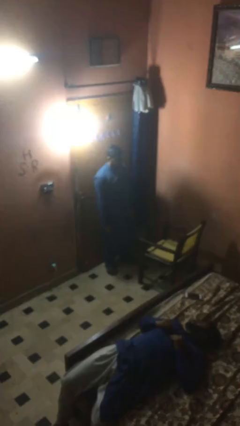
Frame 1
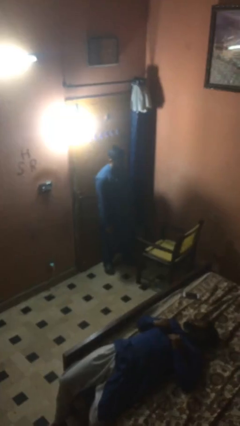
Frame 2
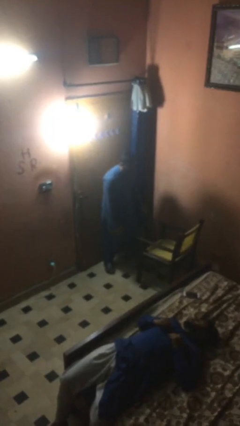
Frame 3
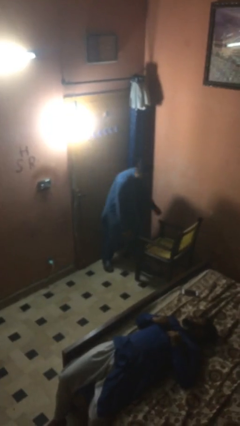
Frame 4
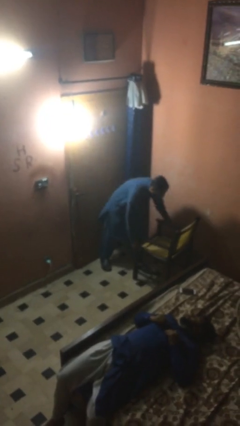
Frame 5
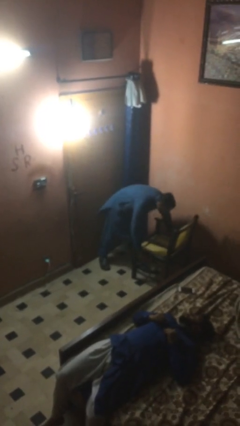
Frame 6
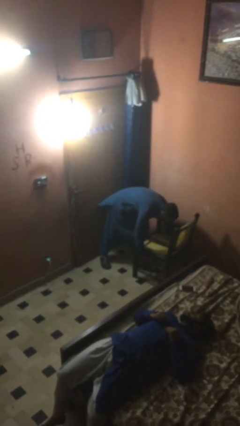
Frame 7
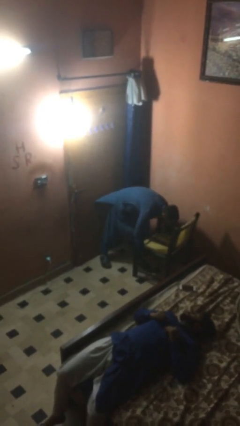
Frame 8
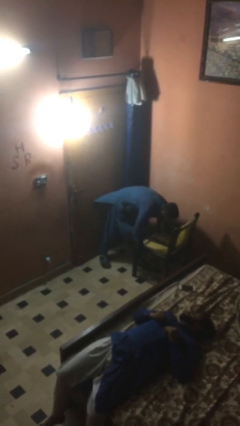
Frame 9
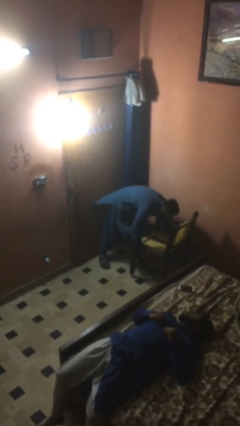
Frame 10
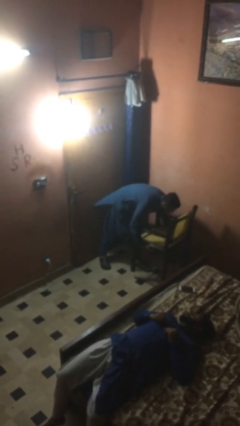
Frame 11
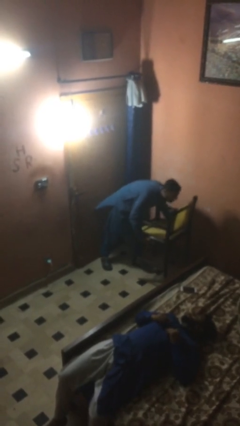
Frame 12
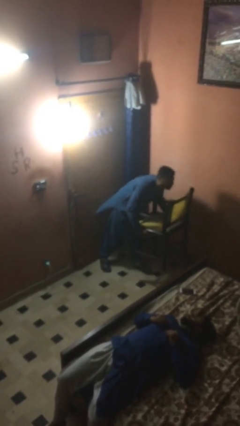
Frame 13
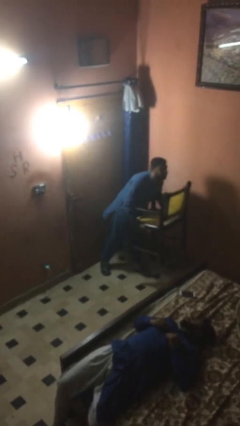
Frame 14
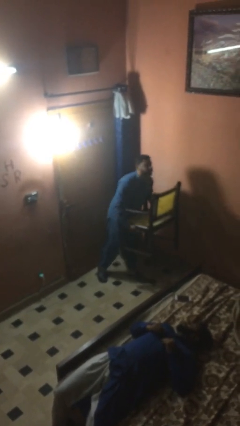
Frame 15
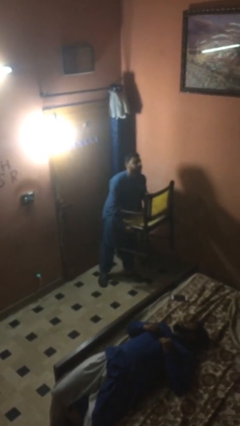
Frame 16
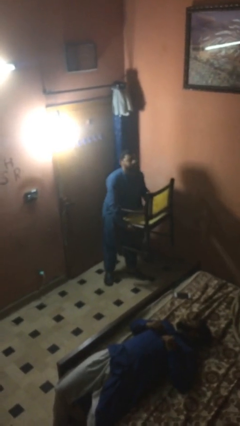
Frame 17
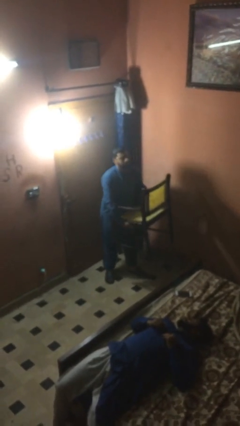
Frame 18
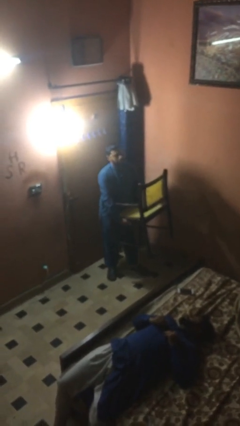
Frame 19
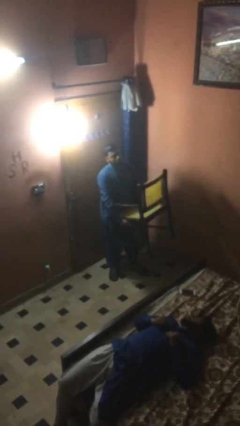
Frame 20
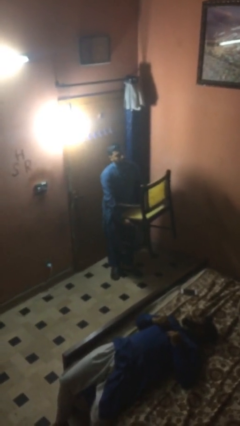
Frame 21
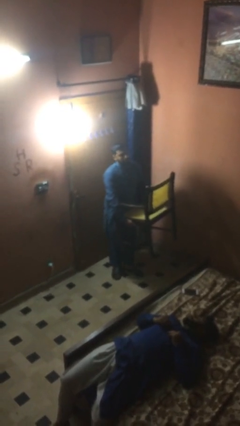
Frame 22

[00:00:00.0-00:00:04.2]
person picks up object from floor

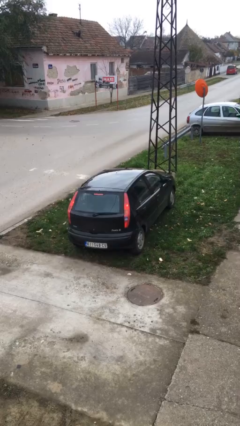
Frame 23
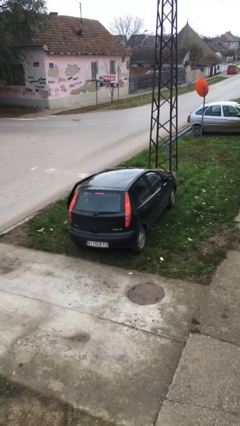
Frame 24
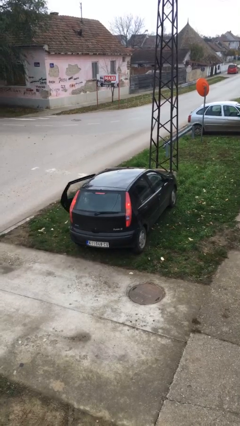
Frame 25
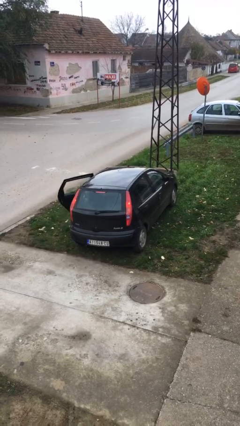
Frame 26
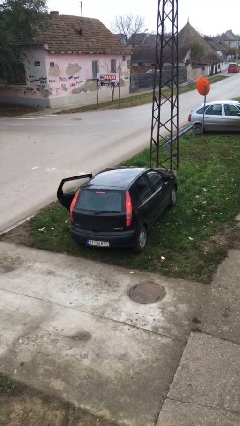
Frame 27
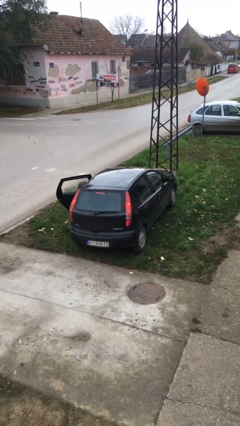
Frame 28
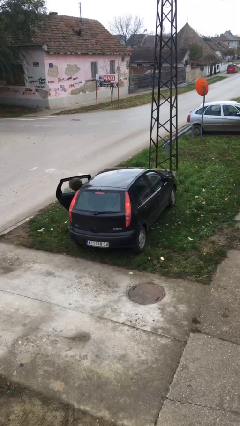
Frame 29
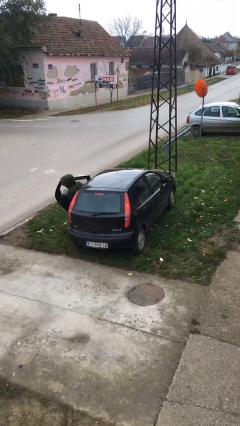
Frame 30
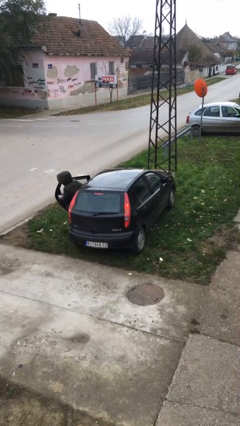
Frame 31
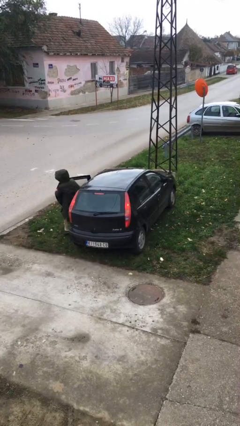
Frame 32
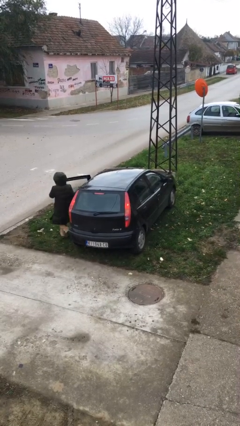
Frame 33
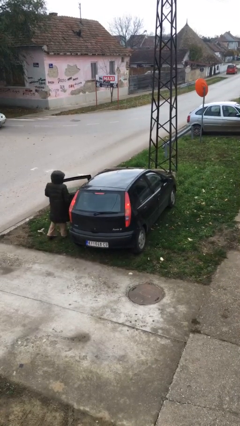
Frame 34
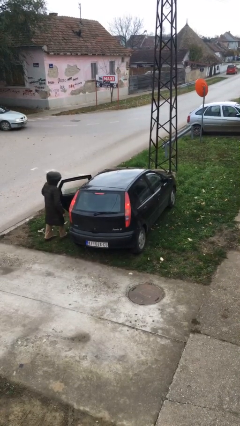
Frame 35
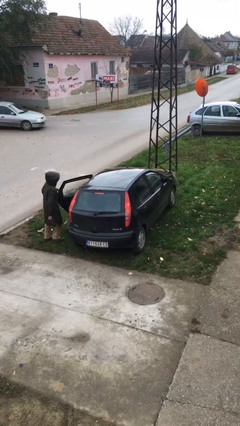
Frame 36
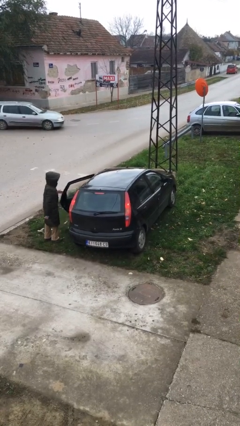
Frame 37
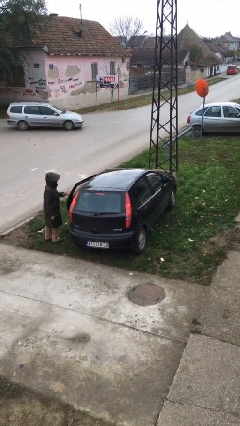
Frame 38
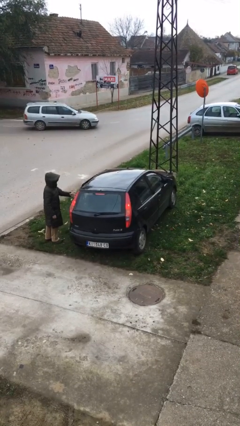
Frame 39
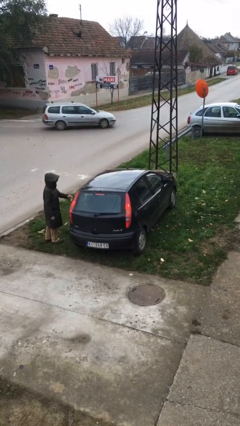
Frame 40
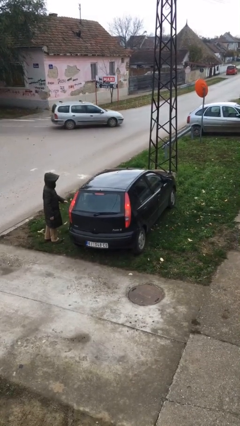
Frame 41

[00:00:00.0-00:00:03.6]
car drops off person

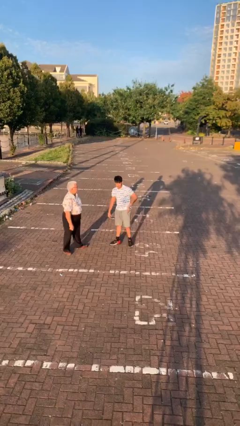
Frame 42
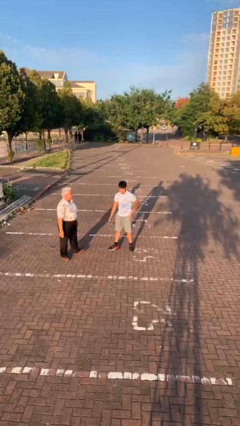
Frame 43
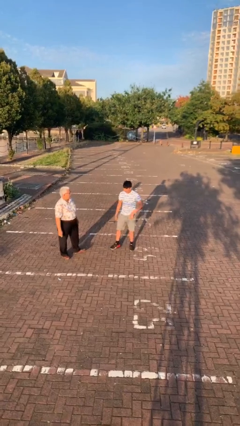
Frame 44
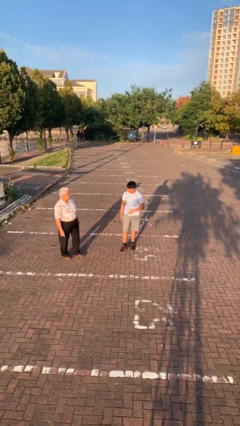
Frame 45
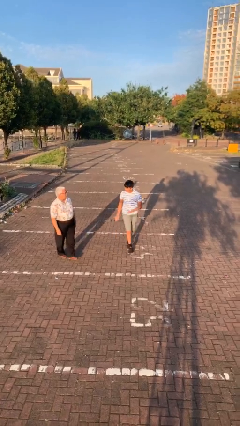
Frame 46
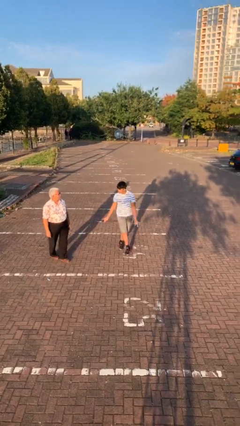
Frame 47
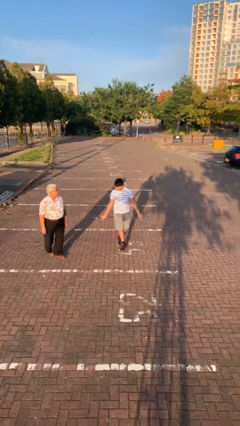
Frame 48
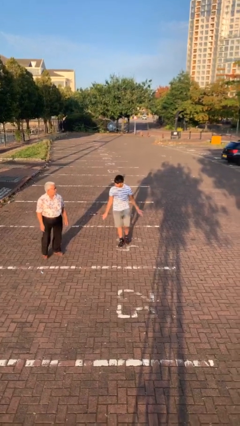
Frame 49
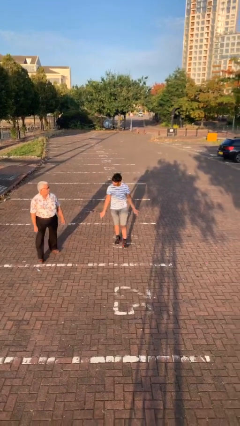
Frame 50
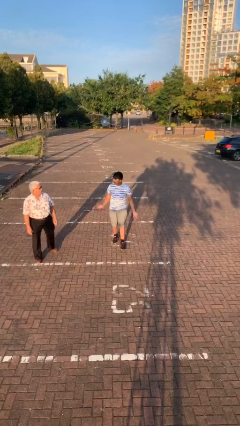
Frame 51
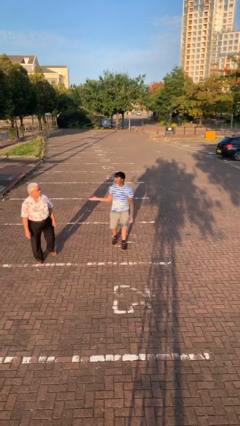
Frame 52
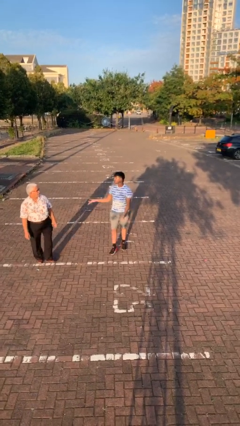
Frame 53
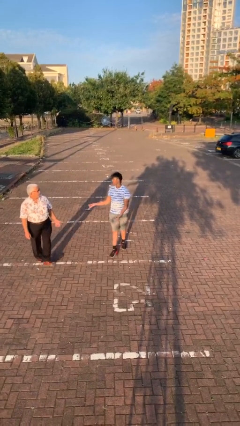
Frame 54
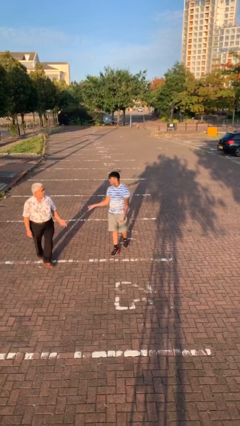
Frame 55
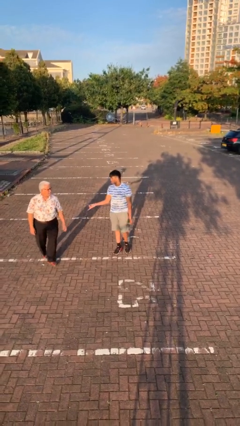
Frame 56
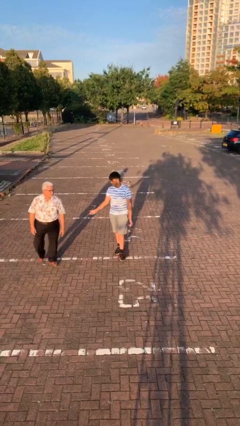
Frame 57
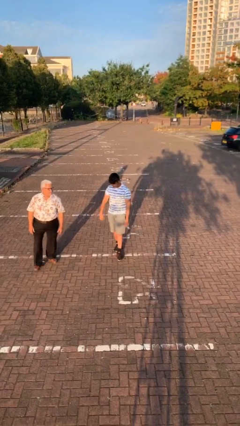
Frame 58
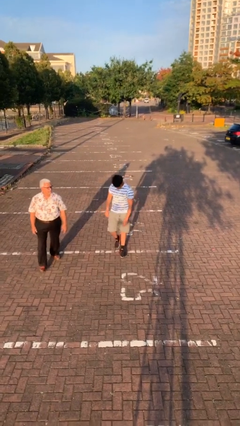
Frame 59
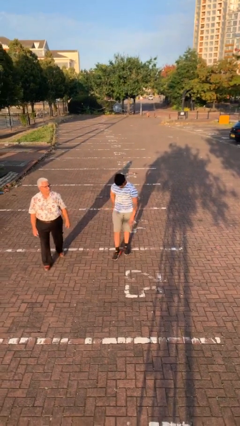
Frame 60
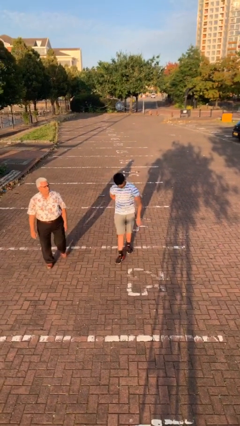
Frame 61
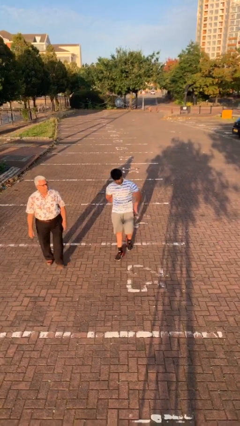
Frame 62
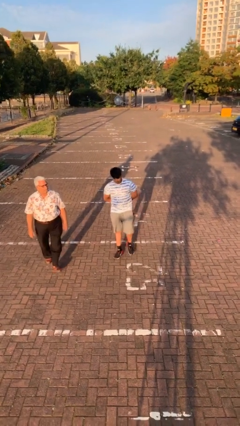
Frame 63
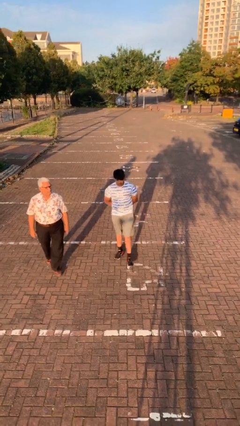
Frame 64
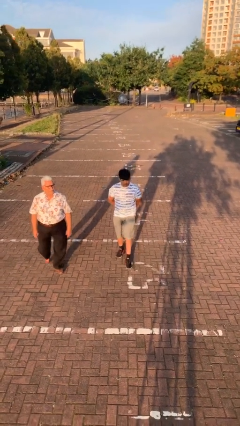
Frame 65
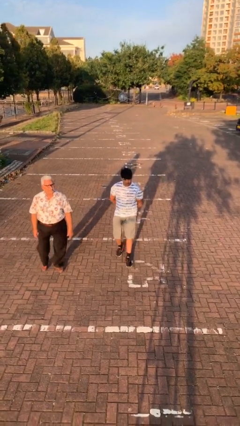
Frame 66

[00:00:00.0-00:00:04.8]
person talks to person

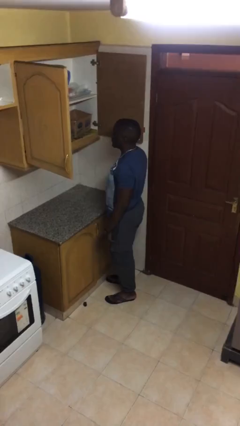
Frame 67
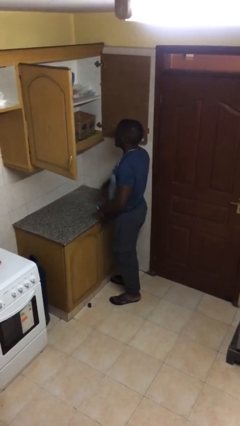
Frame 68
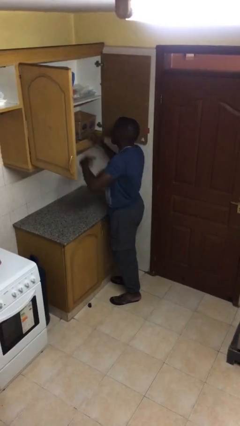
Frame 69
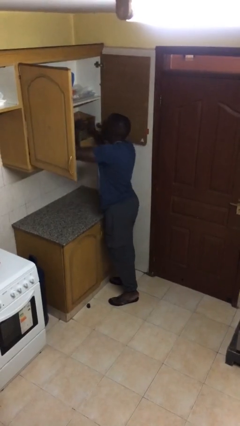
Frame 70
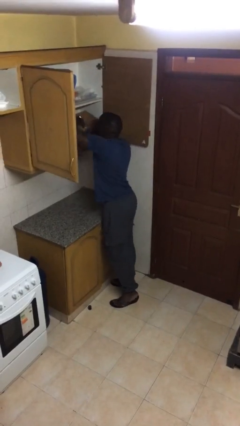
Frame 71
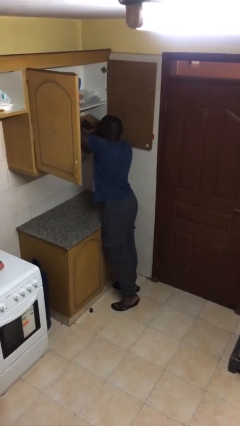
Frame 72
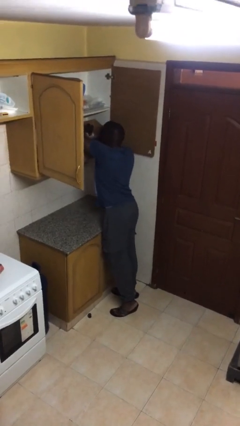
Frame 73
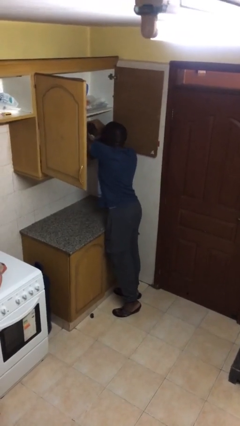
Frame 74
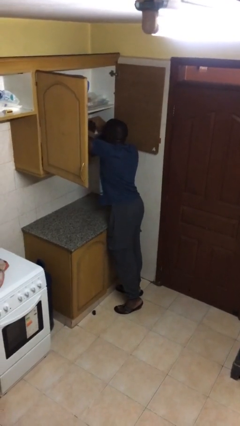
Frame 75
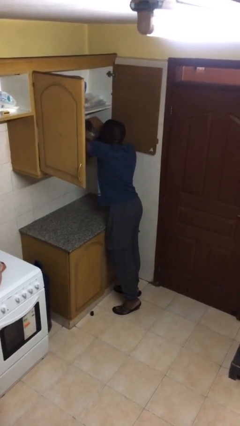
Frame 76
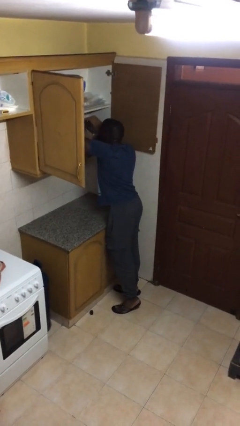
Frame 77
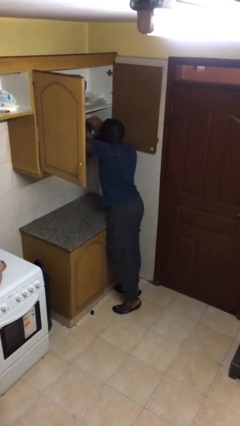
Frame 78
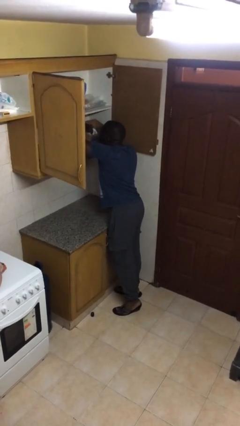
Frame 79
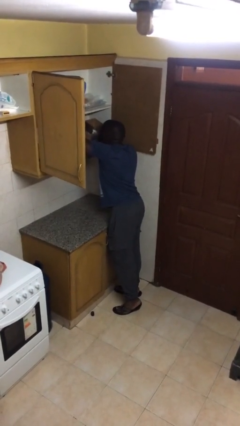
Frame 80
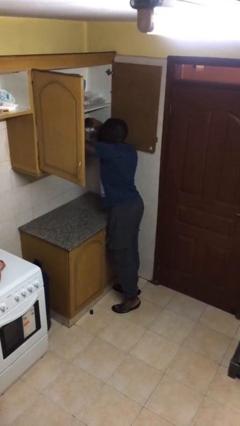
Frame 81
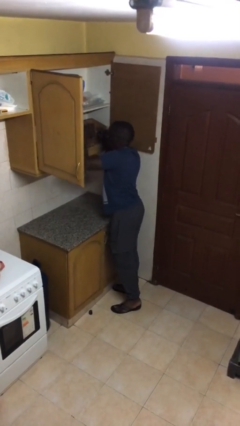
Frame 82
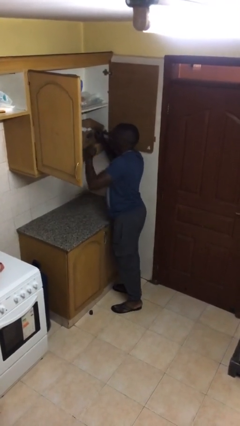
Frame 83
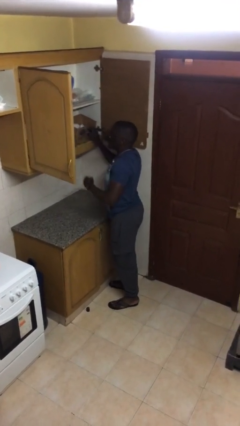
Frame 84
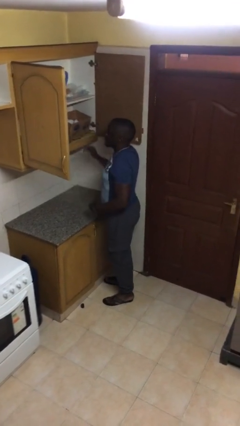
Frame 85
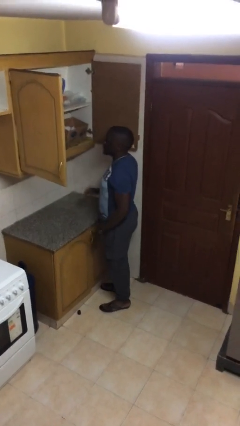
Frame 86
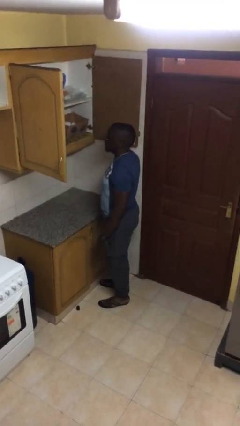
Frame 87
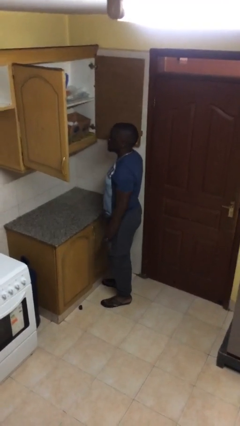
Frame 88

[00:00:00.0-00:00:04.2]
person searches in cabinet

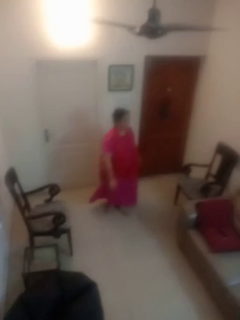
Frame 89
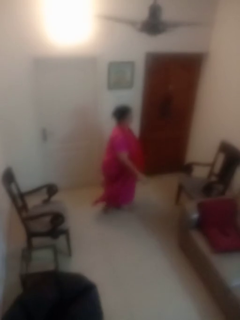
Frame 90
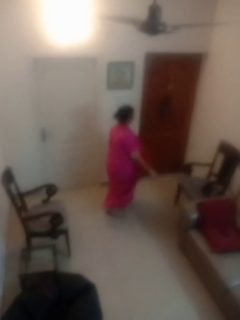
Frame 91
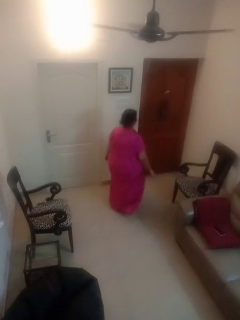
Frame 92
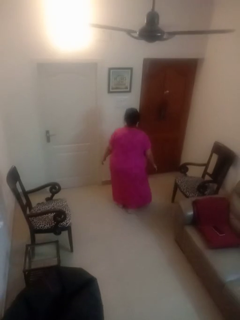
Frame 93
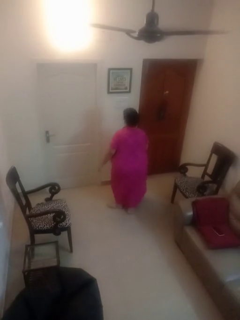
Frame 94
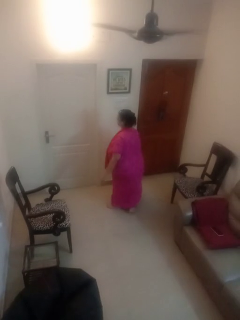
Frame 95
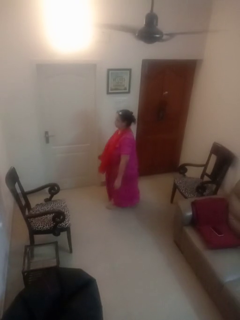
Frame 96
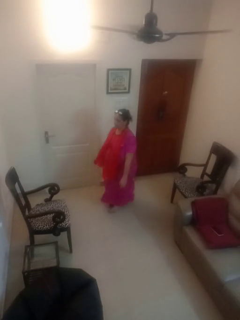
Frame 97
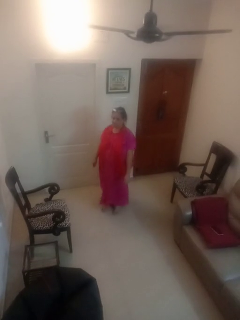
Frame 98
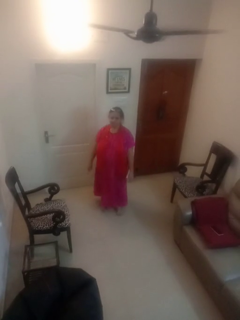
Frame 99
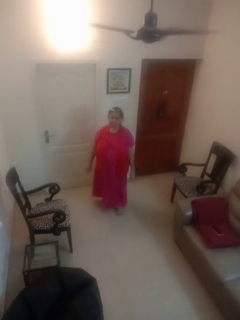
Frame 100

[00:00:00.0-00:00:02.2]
person twirls
